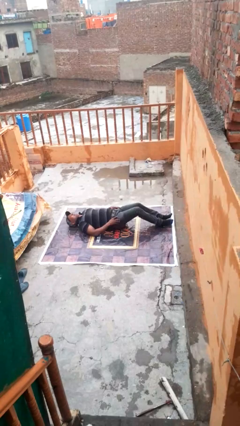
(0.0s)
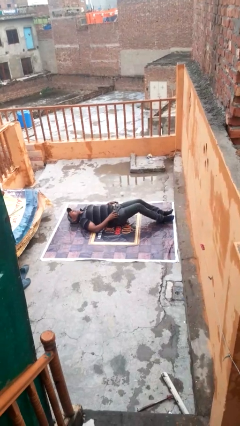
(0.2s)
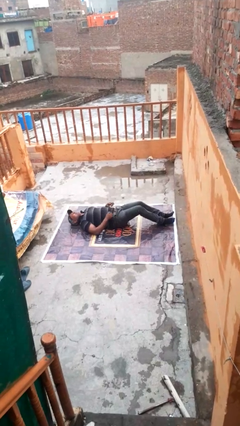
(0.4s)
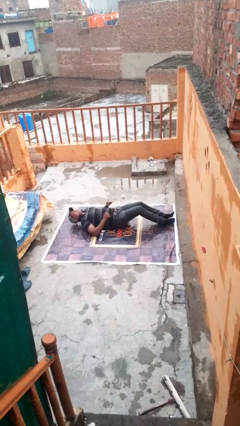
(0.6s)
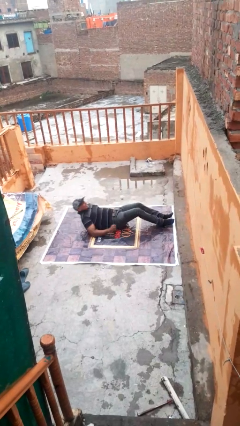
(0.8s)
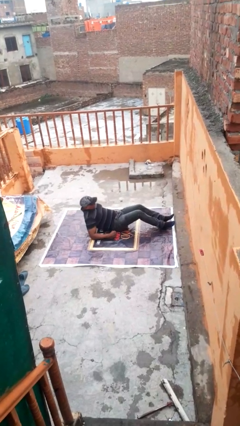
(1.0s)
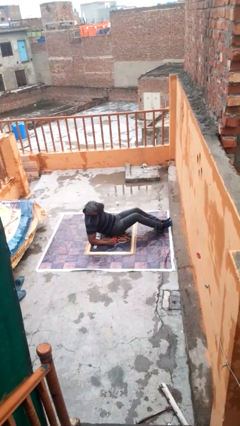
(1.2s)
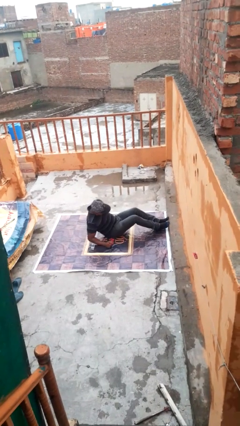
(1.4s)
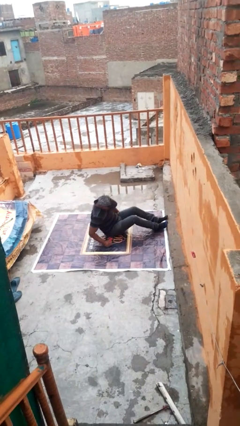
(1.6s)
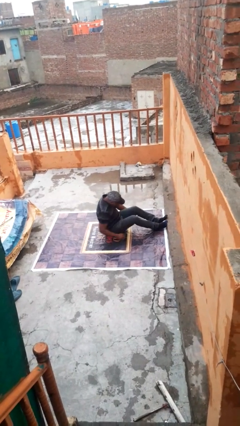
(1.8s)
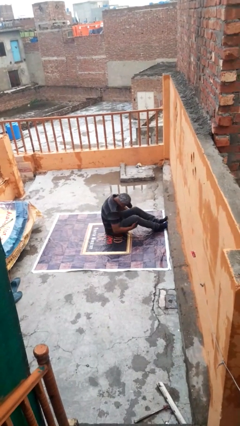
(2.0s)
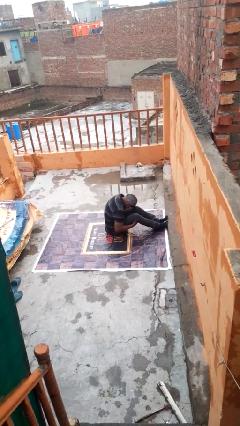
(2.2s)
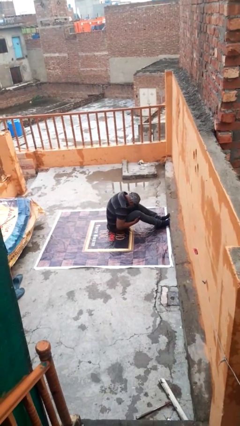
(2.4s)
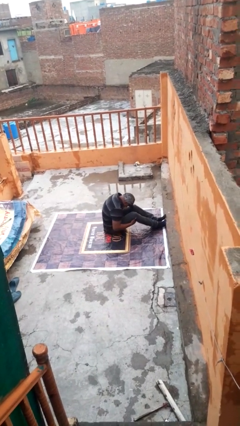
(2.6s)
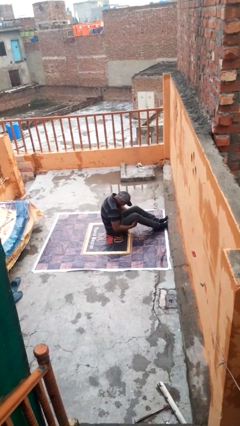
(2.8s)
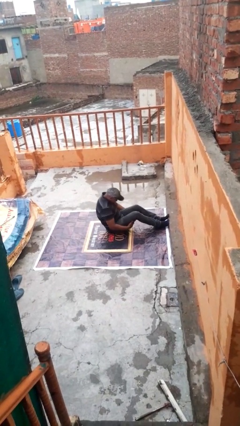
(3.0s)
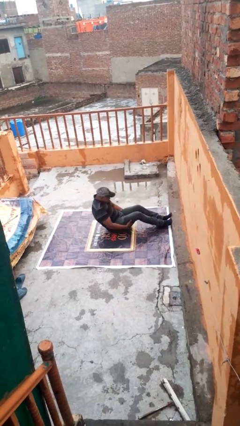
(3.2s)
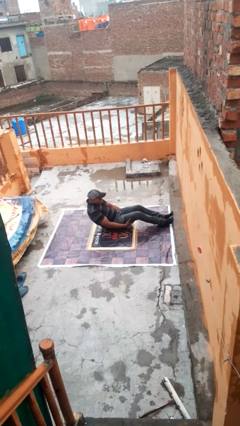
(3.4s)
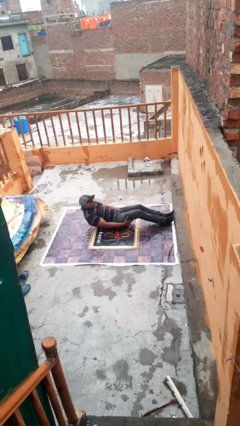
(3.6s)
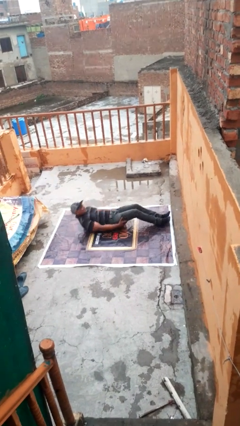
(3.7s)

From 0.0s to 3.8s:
person exercises with situp

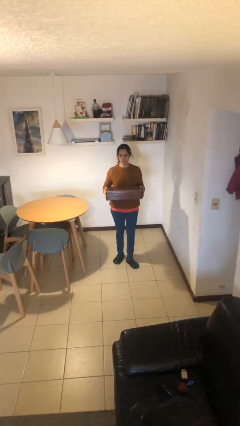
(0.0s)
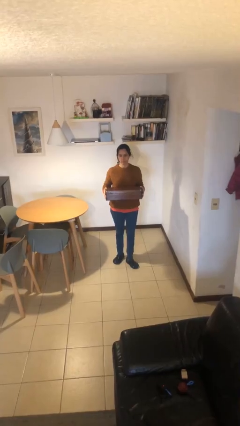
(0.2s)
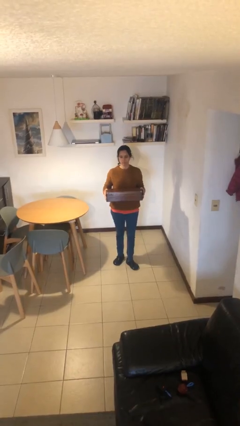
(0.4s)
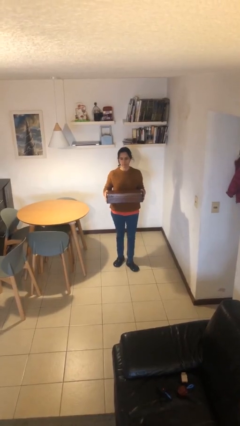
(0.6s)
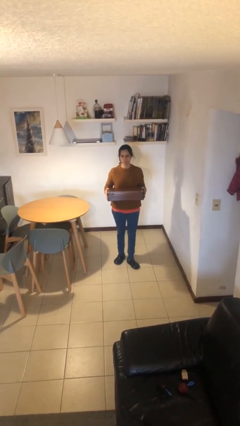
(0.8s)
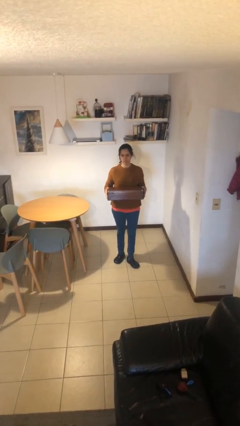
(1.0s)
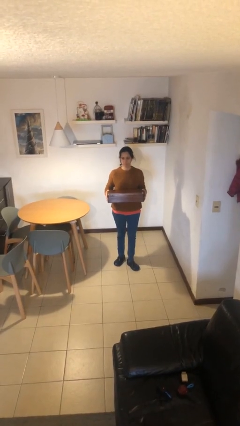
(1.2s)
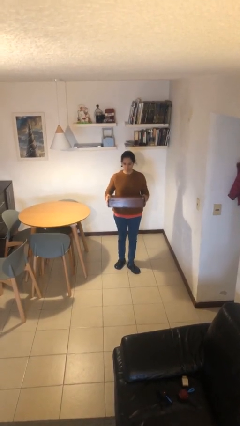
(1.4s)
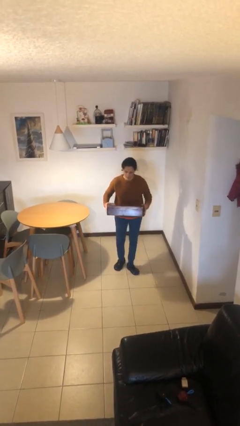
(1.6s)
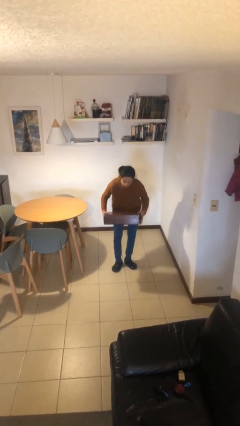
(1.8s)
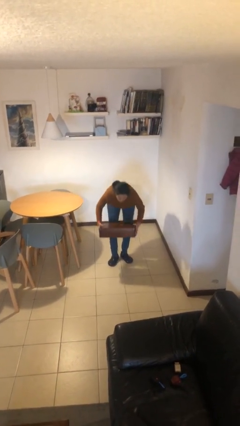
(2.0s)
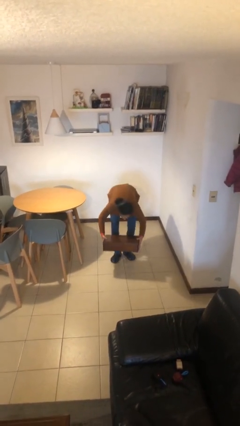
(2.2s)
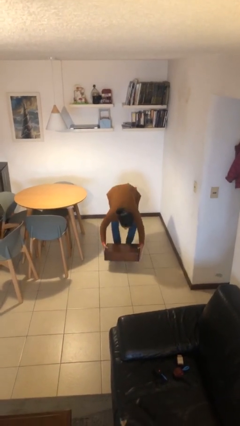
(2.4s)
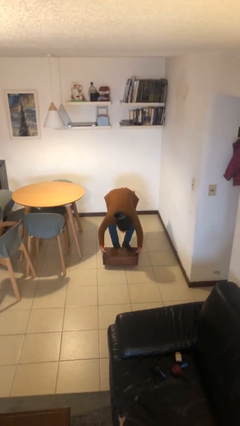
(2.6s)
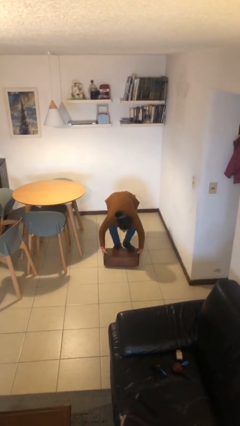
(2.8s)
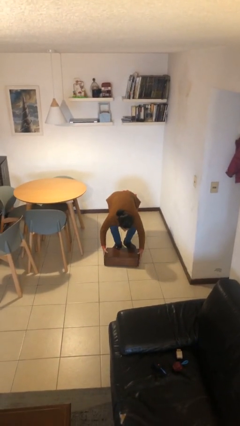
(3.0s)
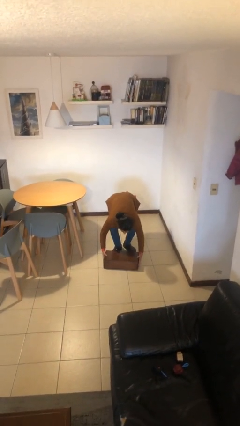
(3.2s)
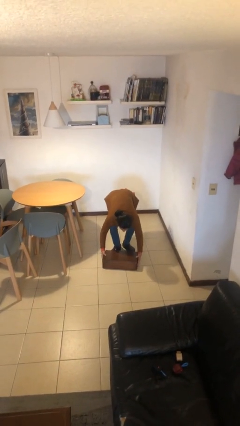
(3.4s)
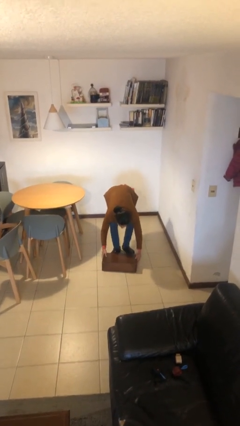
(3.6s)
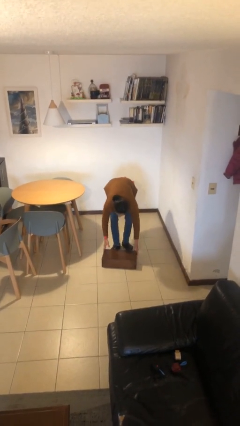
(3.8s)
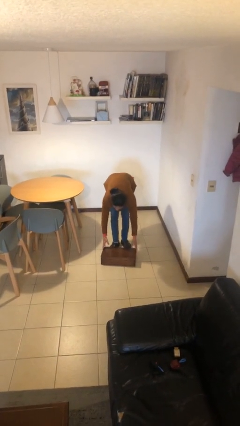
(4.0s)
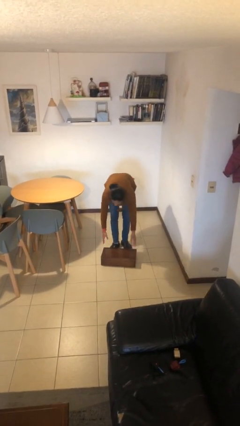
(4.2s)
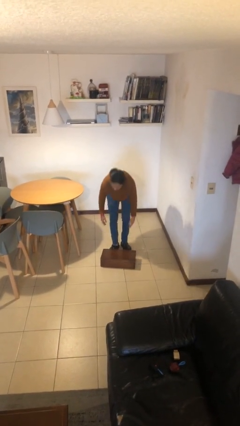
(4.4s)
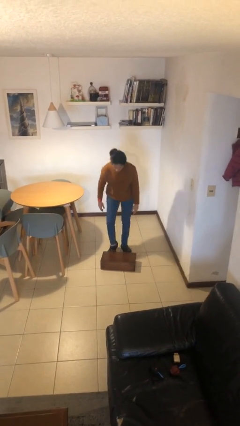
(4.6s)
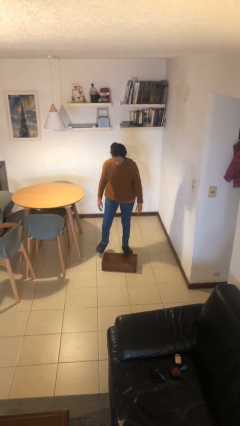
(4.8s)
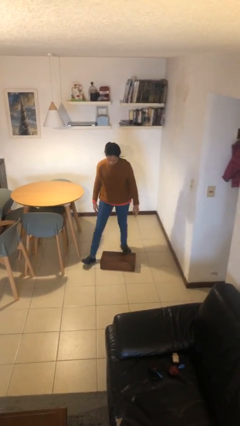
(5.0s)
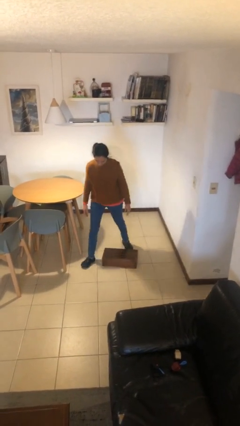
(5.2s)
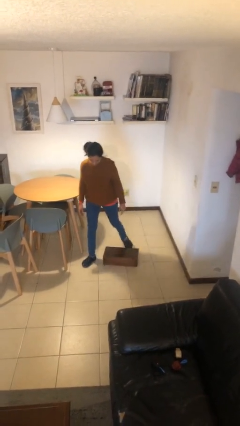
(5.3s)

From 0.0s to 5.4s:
person puts down object on floor

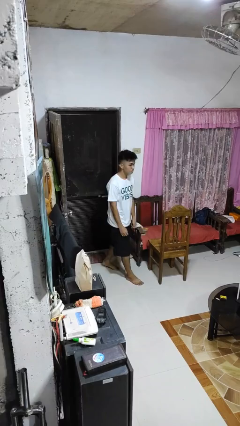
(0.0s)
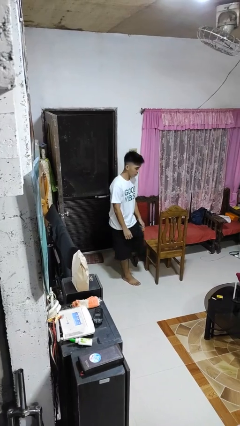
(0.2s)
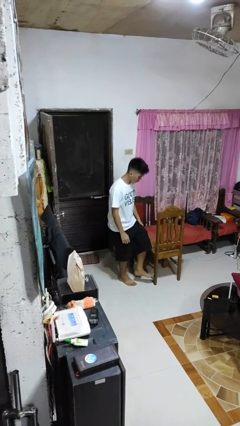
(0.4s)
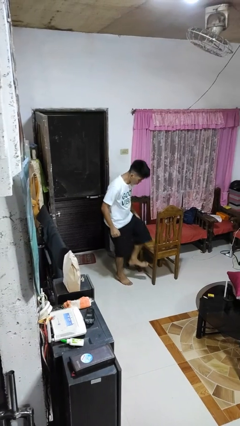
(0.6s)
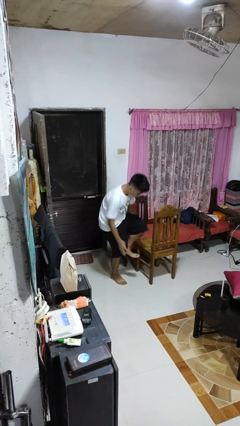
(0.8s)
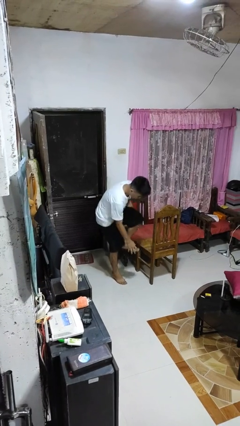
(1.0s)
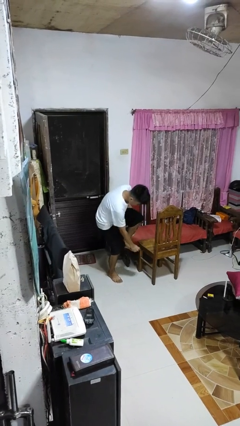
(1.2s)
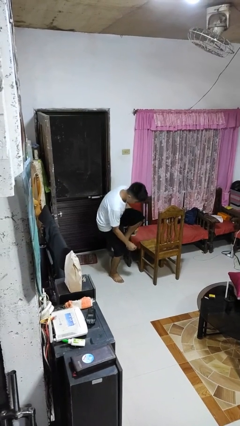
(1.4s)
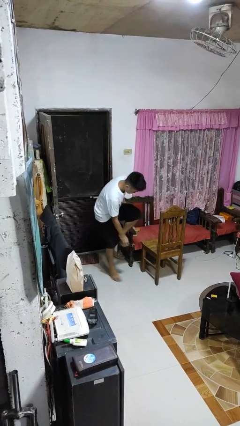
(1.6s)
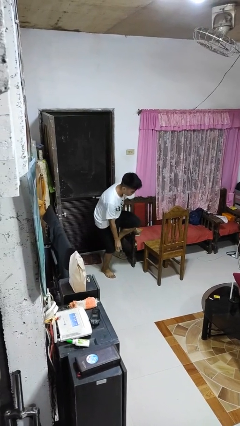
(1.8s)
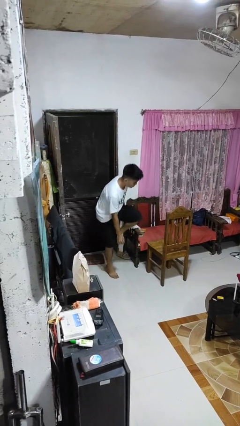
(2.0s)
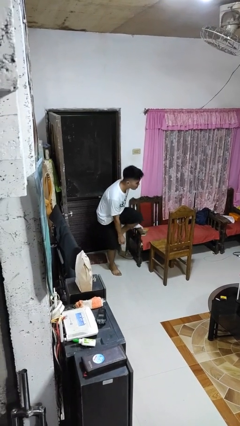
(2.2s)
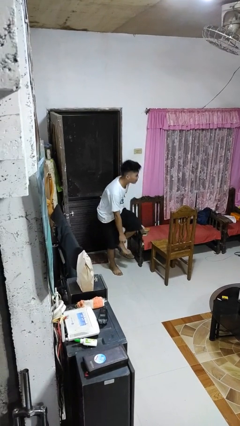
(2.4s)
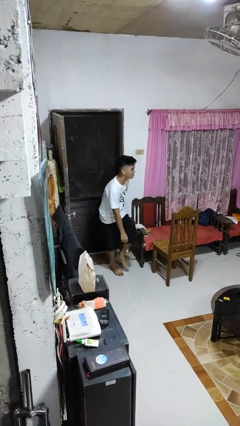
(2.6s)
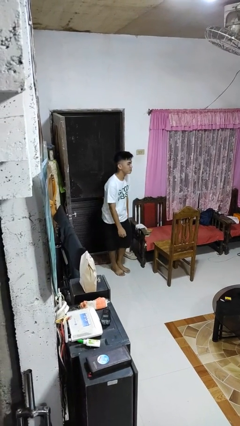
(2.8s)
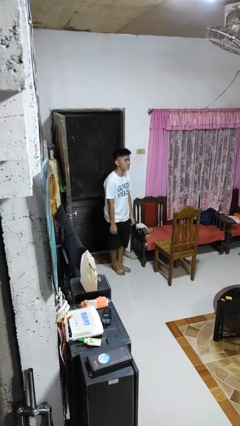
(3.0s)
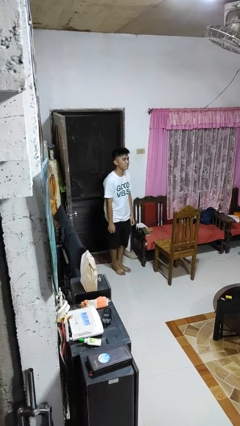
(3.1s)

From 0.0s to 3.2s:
person stubs toe

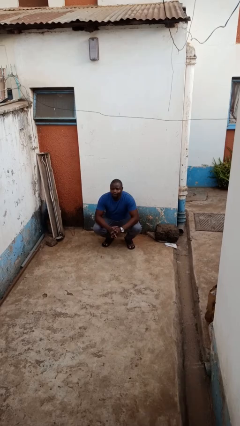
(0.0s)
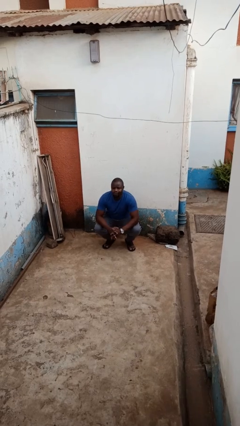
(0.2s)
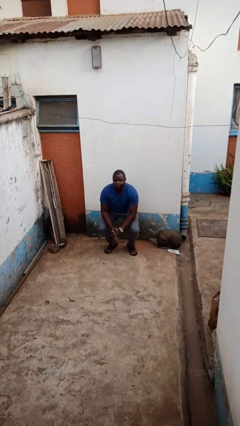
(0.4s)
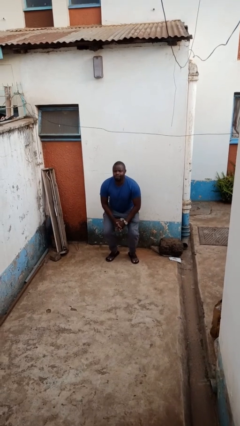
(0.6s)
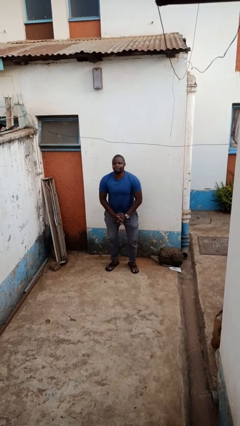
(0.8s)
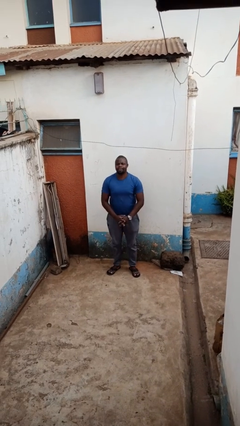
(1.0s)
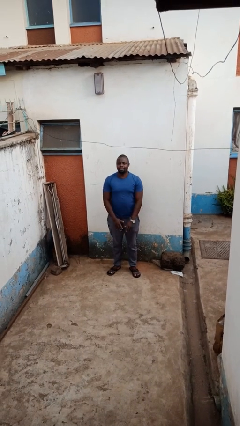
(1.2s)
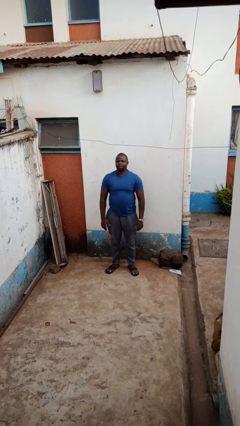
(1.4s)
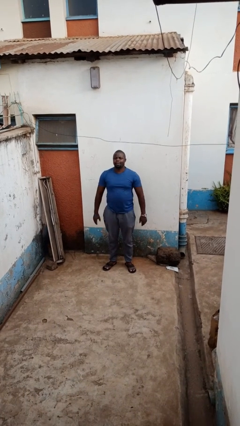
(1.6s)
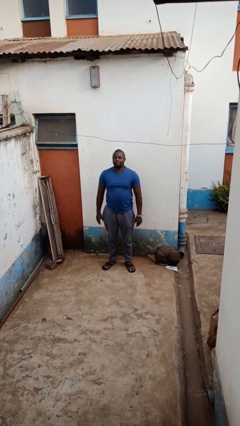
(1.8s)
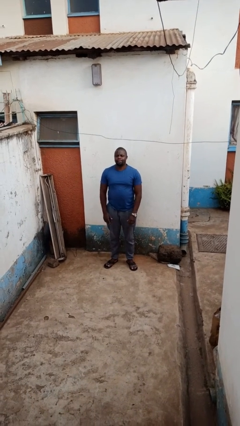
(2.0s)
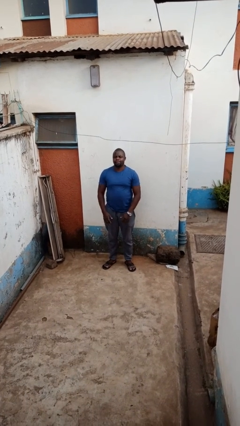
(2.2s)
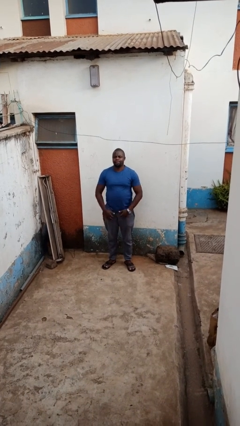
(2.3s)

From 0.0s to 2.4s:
person stands up

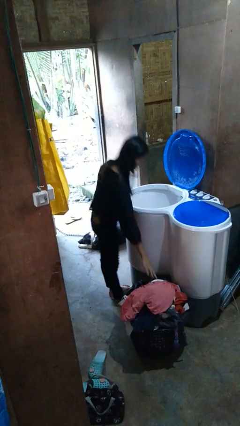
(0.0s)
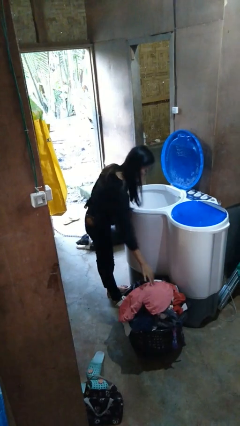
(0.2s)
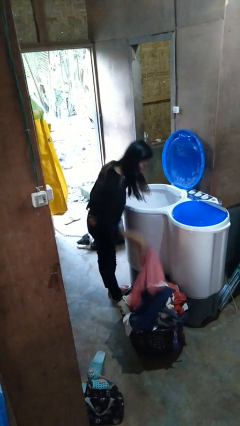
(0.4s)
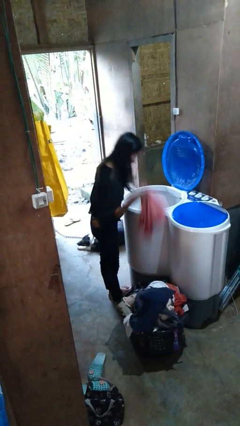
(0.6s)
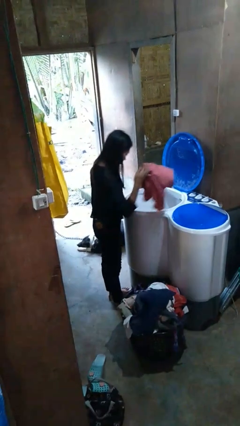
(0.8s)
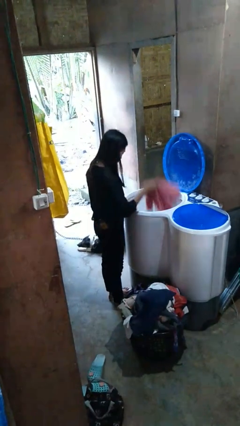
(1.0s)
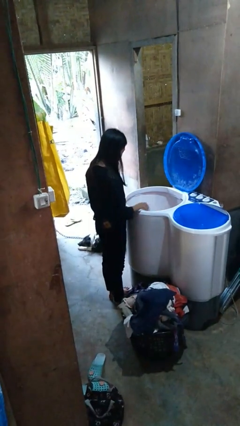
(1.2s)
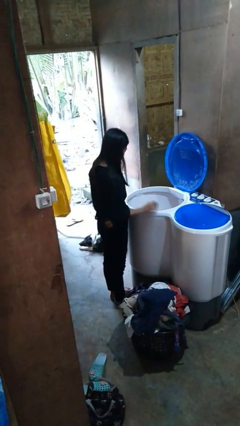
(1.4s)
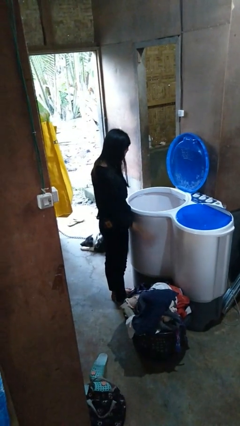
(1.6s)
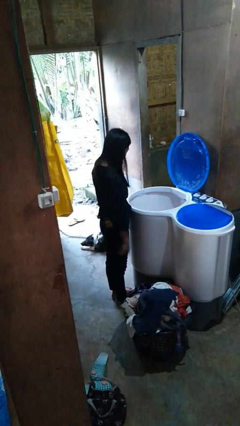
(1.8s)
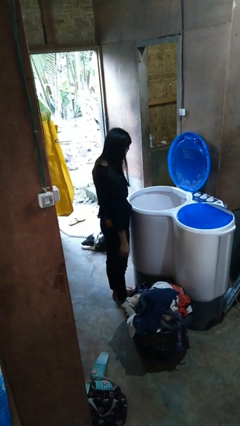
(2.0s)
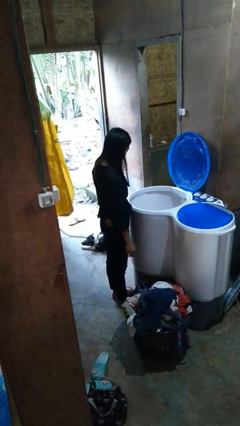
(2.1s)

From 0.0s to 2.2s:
person loads clotheswasher

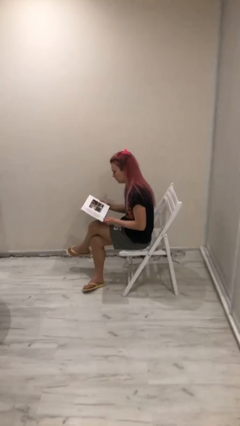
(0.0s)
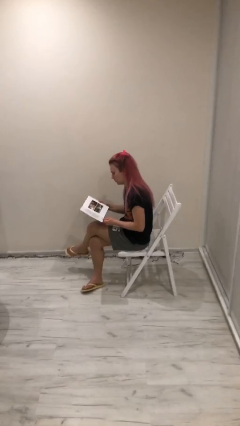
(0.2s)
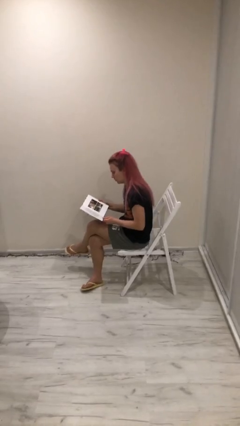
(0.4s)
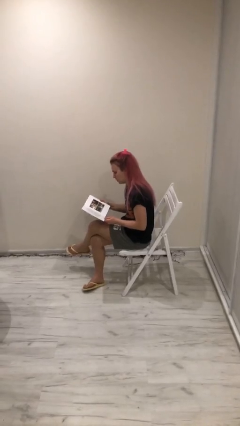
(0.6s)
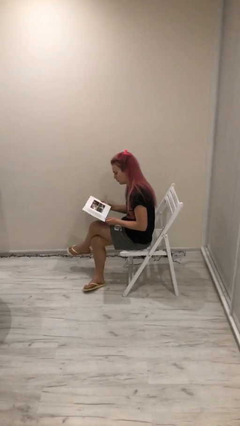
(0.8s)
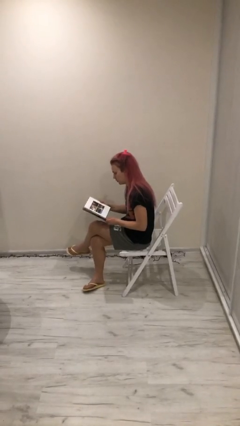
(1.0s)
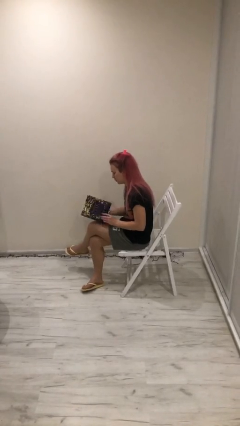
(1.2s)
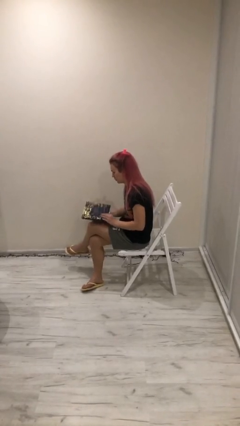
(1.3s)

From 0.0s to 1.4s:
person reads document
